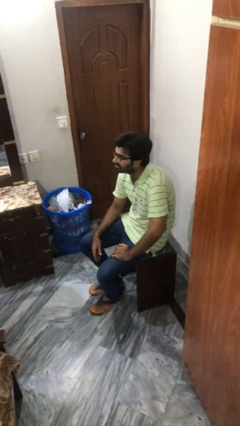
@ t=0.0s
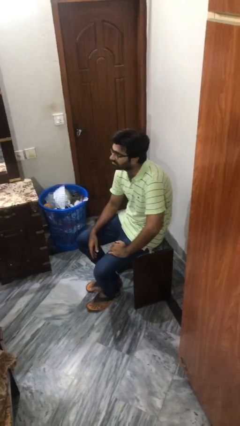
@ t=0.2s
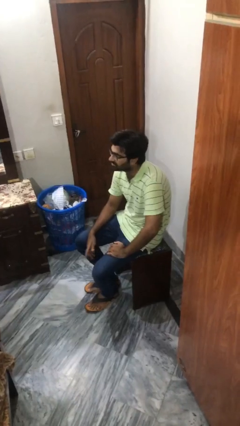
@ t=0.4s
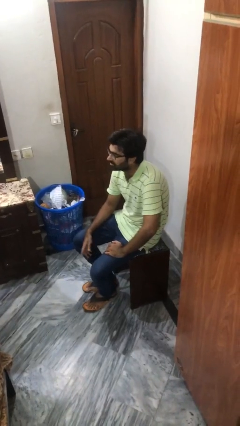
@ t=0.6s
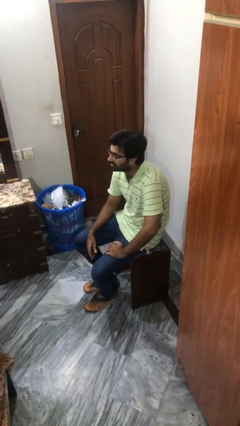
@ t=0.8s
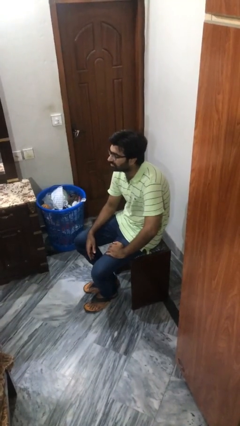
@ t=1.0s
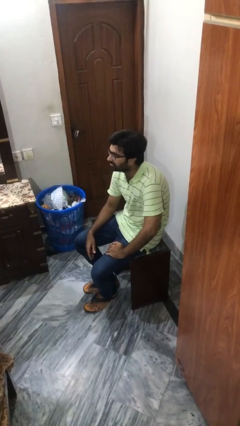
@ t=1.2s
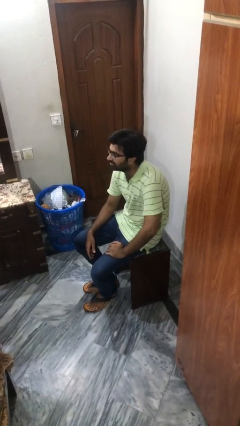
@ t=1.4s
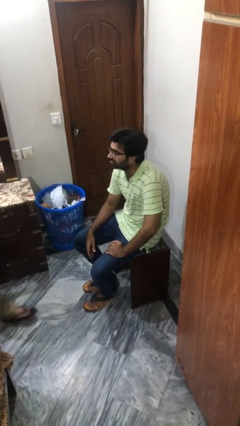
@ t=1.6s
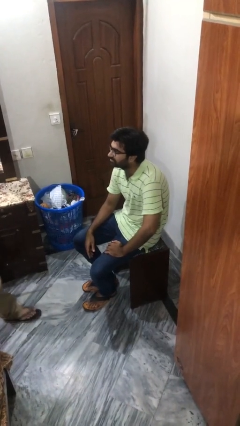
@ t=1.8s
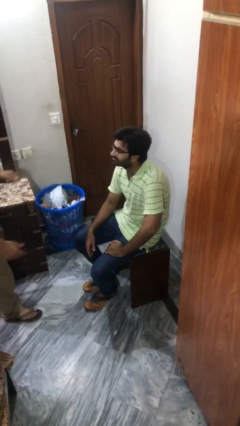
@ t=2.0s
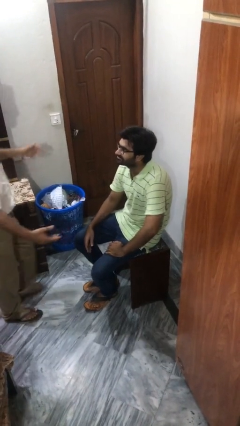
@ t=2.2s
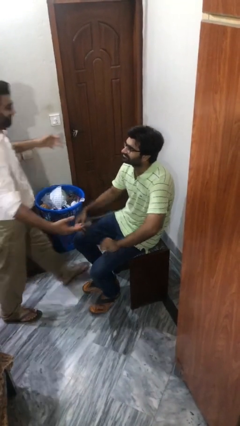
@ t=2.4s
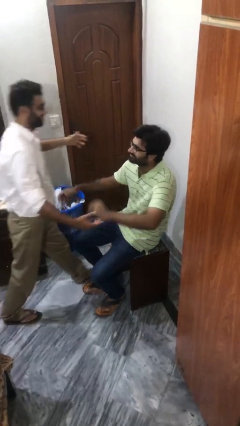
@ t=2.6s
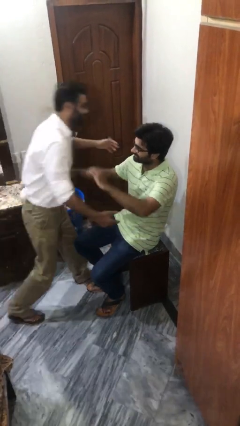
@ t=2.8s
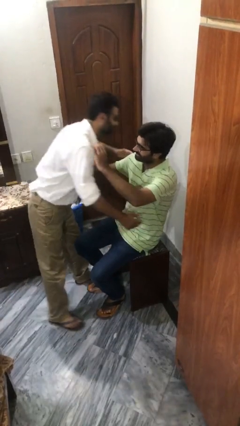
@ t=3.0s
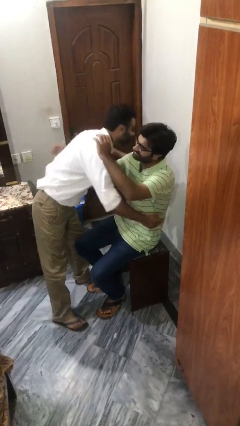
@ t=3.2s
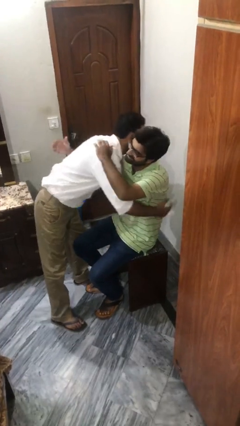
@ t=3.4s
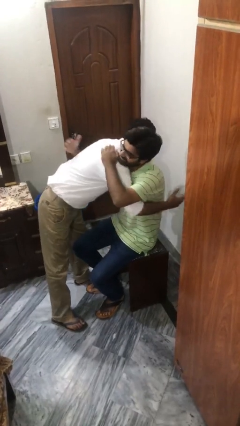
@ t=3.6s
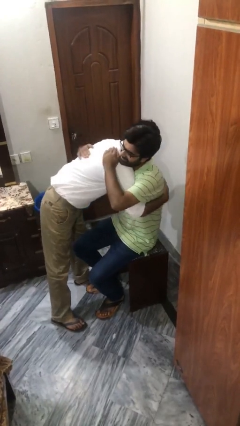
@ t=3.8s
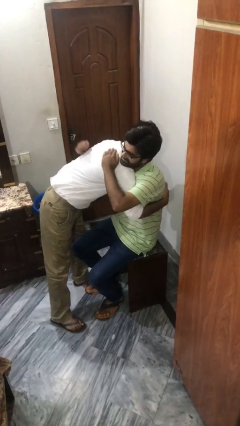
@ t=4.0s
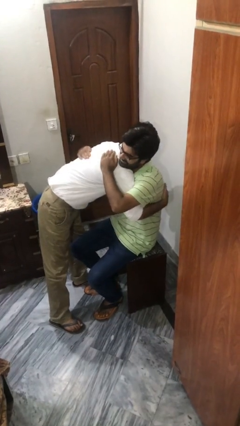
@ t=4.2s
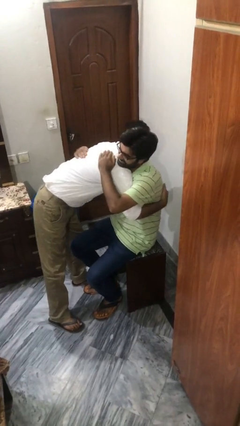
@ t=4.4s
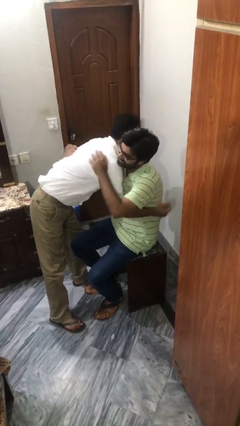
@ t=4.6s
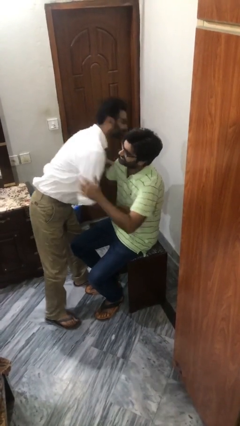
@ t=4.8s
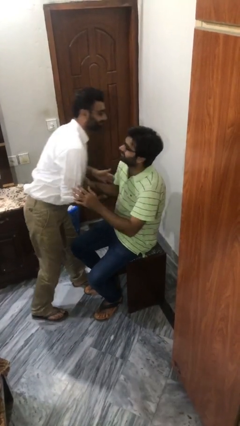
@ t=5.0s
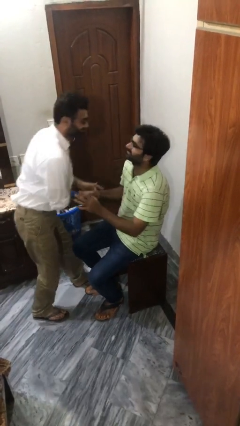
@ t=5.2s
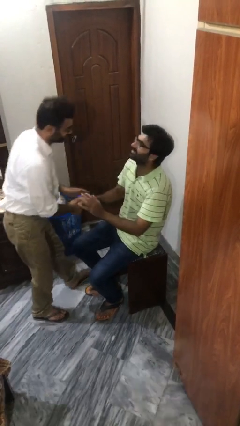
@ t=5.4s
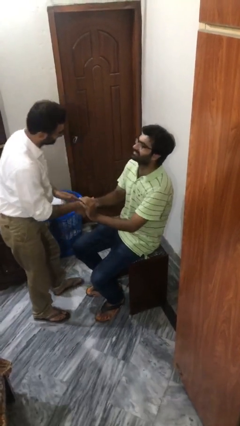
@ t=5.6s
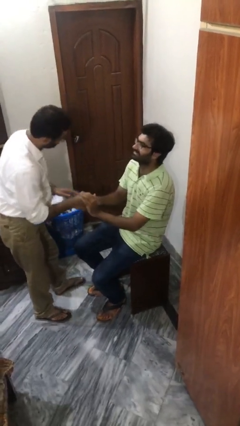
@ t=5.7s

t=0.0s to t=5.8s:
person embraces person

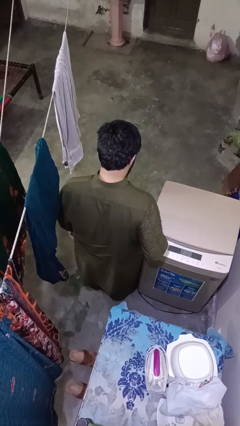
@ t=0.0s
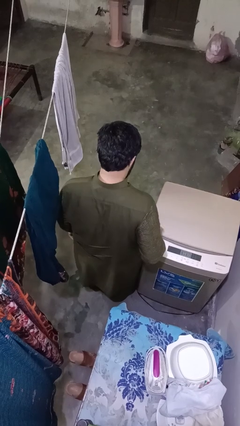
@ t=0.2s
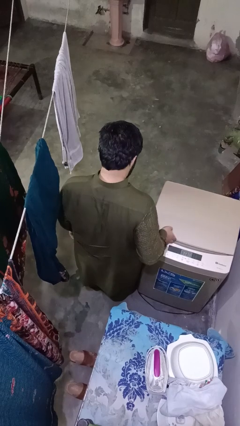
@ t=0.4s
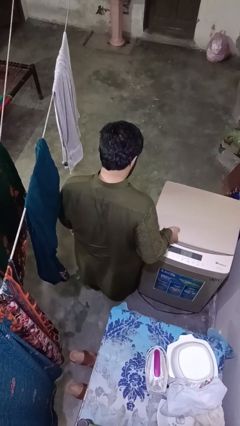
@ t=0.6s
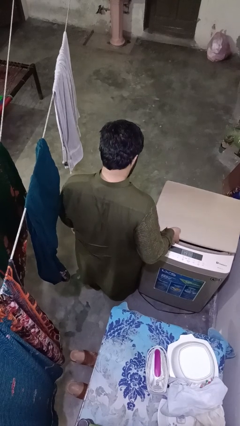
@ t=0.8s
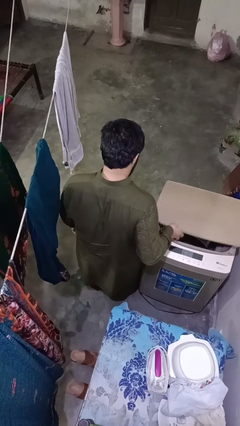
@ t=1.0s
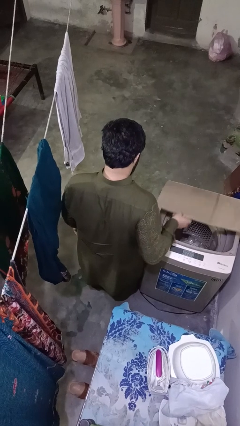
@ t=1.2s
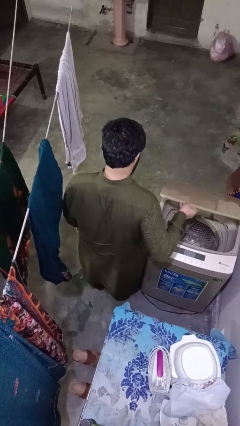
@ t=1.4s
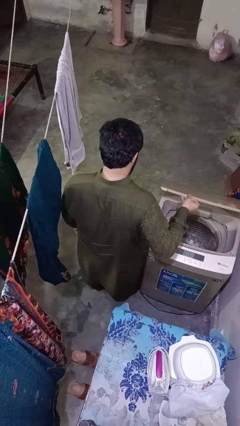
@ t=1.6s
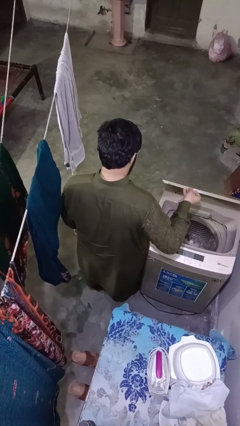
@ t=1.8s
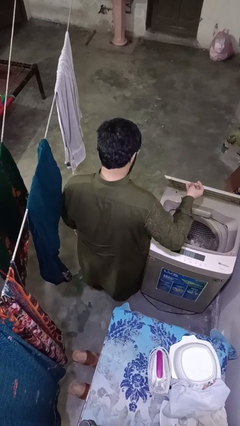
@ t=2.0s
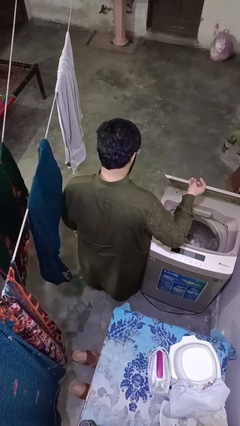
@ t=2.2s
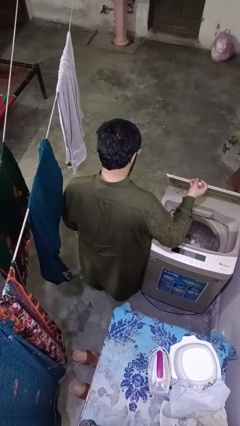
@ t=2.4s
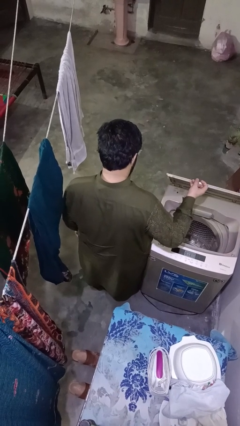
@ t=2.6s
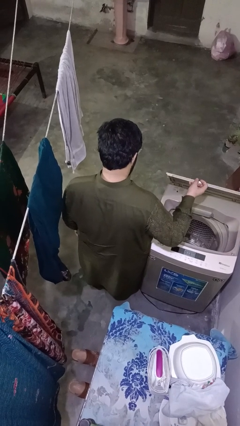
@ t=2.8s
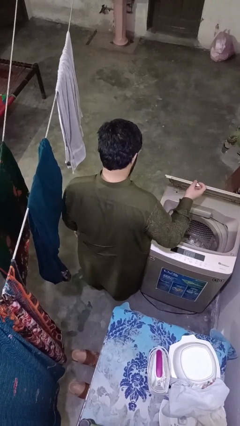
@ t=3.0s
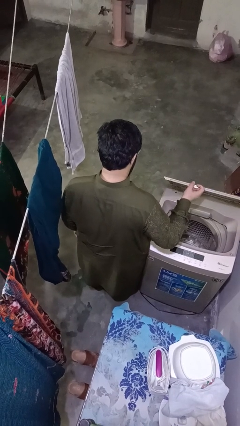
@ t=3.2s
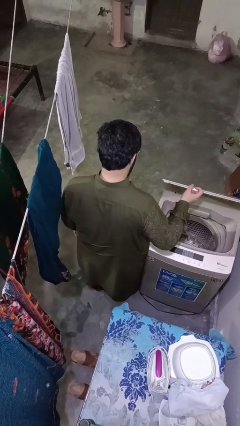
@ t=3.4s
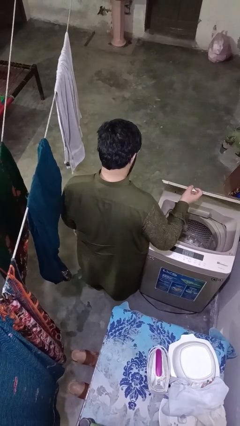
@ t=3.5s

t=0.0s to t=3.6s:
person opens clothes washer

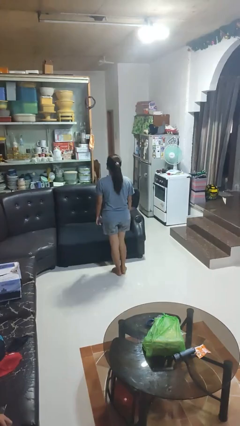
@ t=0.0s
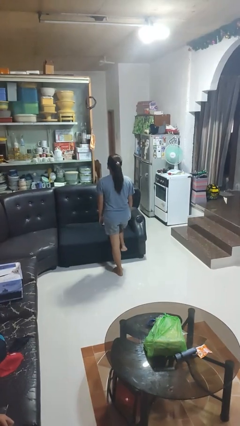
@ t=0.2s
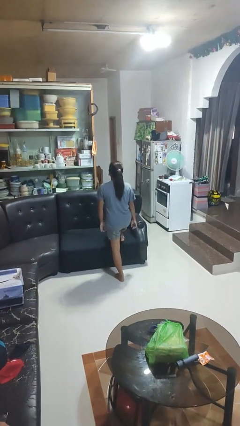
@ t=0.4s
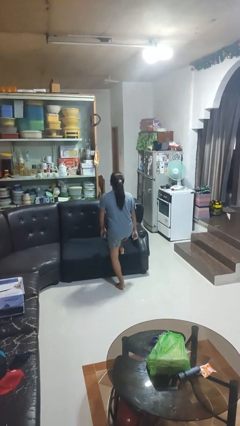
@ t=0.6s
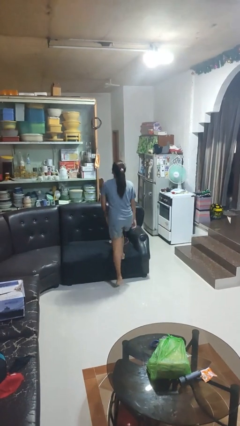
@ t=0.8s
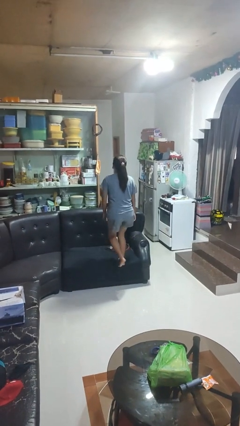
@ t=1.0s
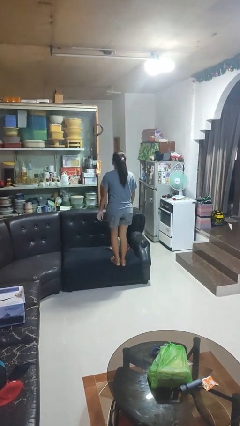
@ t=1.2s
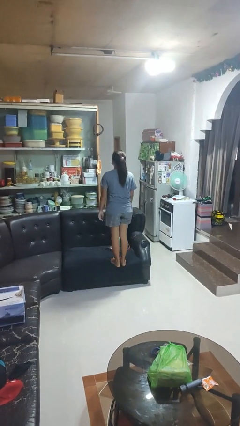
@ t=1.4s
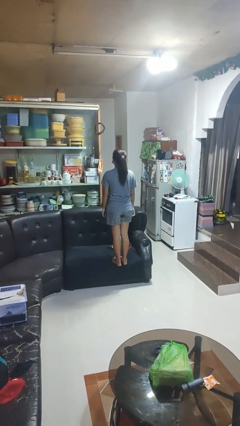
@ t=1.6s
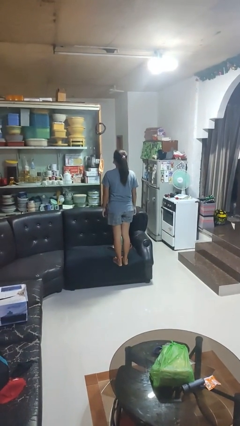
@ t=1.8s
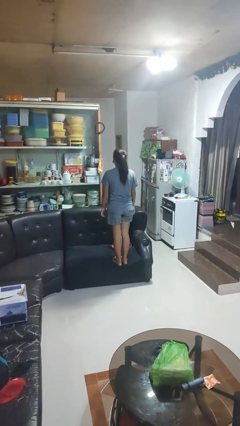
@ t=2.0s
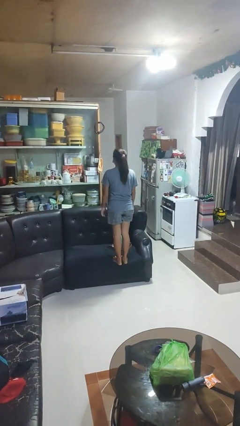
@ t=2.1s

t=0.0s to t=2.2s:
person climbs on couch

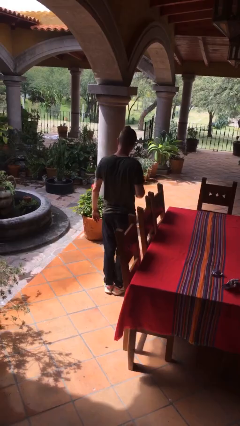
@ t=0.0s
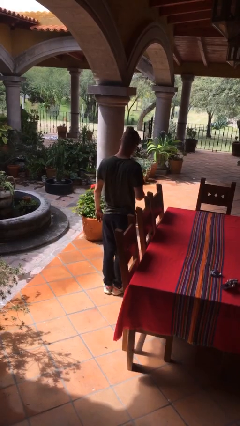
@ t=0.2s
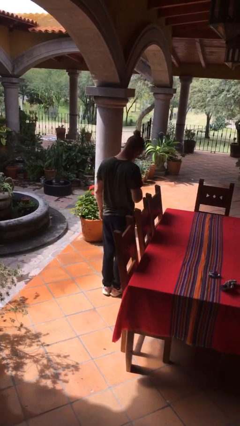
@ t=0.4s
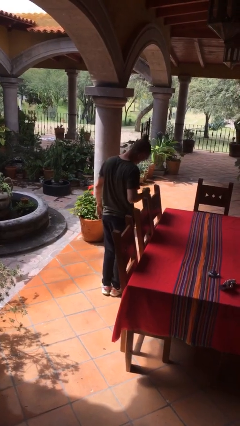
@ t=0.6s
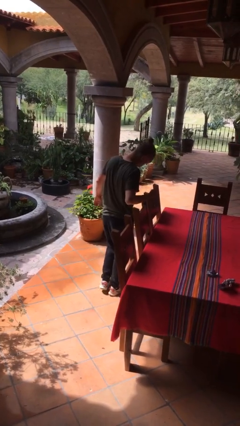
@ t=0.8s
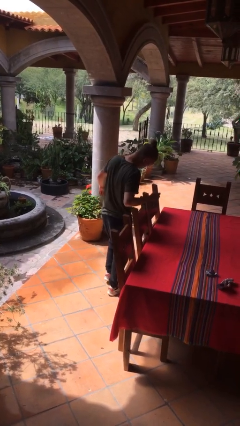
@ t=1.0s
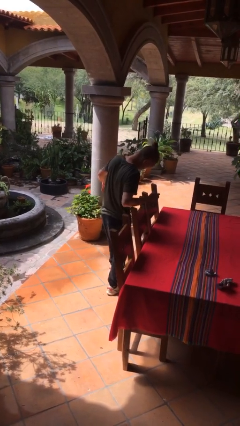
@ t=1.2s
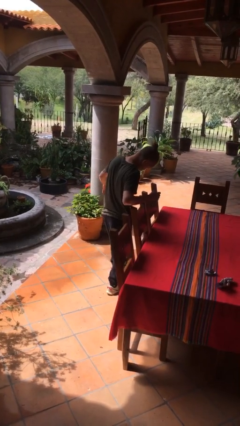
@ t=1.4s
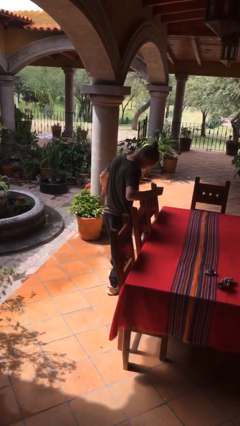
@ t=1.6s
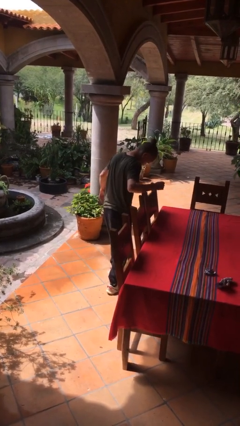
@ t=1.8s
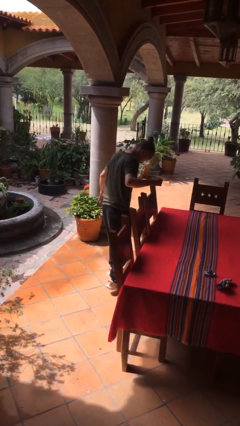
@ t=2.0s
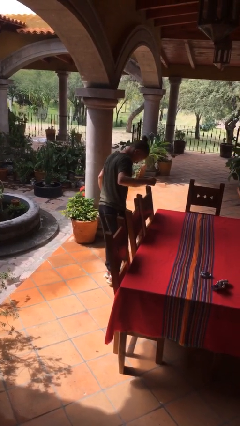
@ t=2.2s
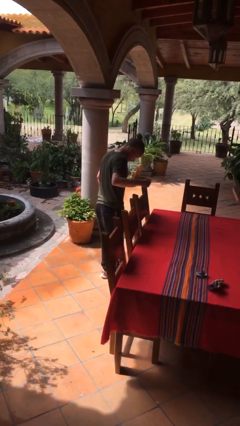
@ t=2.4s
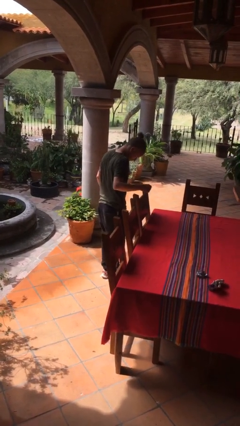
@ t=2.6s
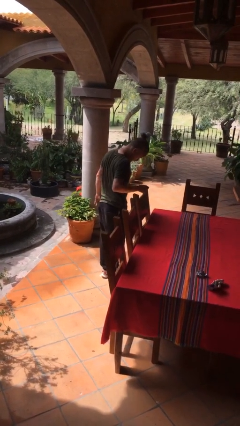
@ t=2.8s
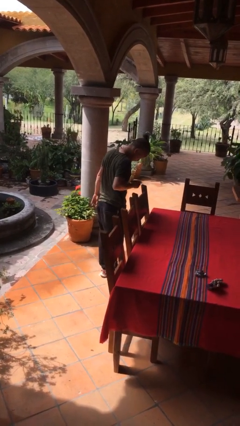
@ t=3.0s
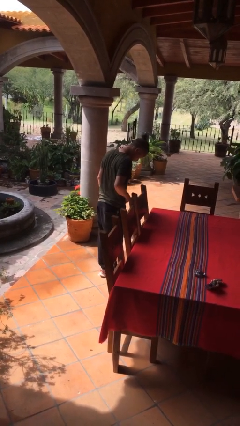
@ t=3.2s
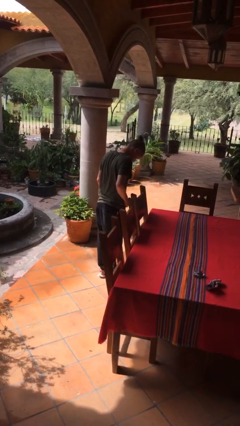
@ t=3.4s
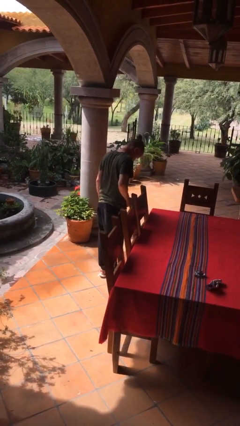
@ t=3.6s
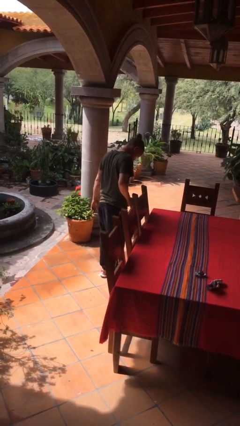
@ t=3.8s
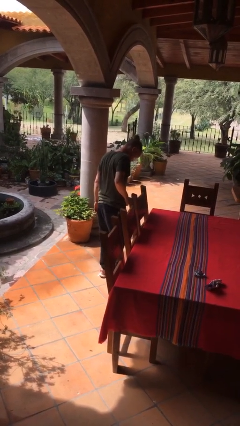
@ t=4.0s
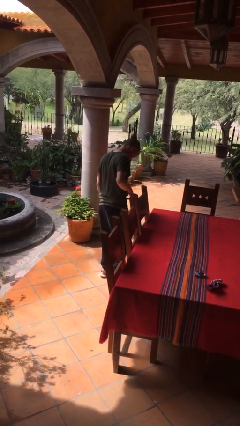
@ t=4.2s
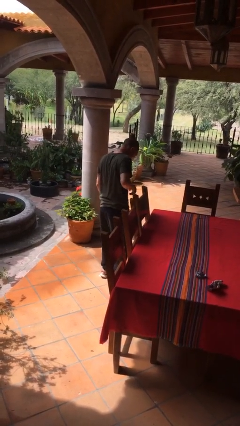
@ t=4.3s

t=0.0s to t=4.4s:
person uses bodyweight scale

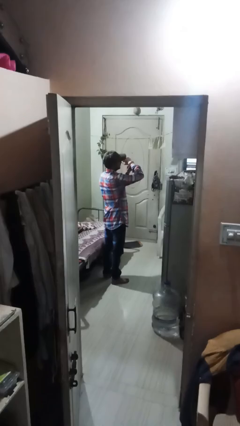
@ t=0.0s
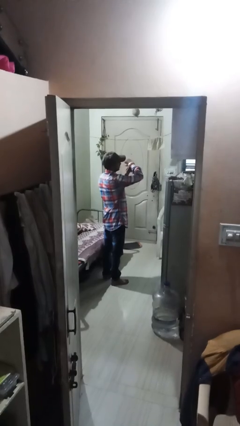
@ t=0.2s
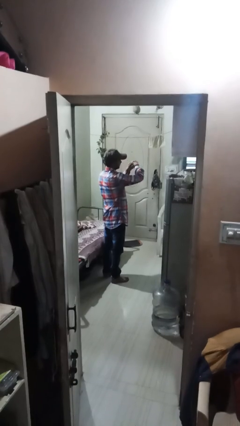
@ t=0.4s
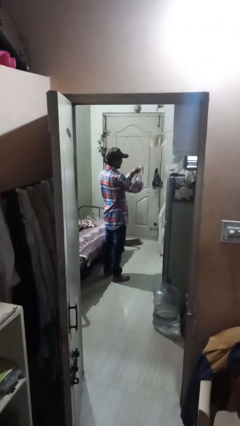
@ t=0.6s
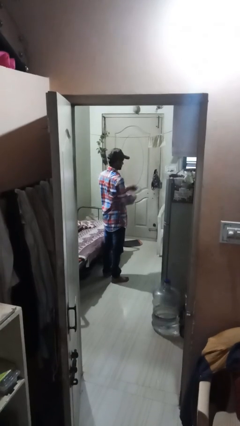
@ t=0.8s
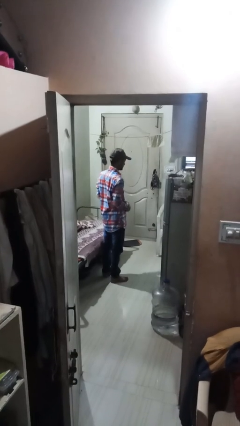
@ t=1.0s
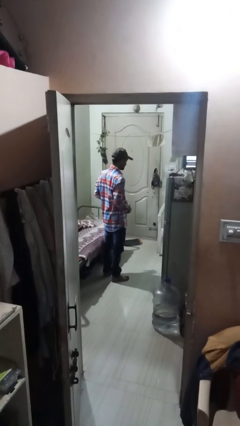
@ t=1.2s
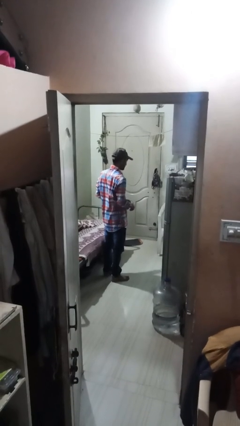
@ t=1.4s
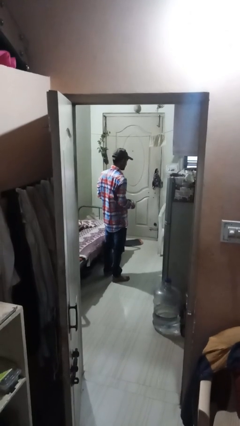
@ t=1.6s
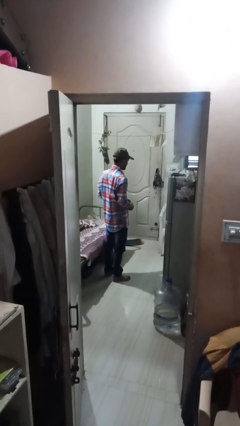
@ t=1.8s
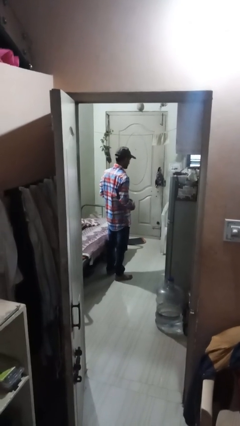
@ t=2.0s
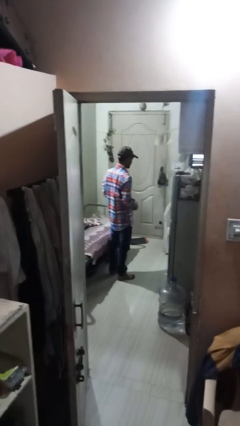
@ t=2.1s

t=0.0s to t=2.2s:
person takes off wristwatch
